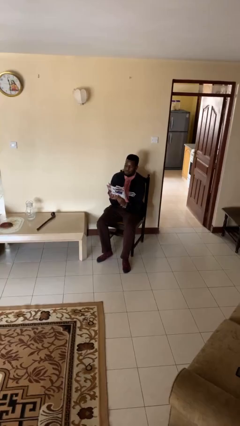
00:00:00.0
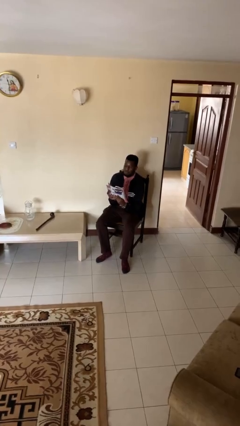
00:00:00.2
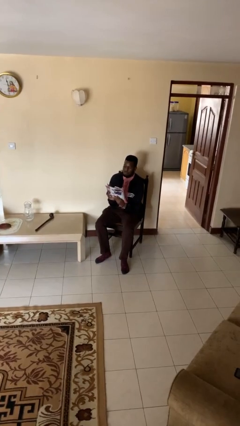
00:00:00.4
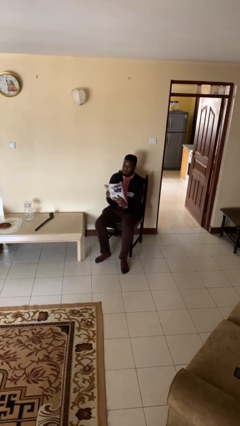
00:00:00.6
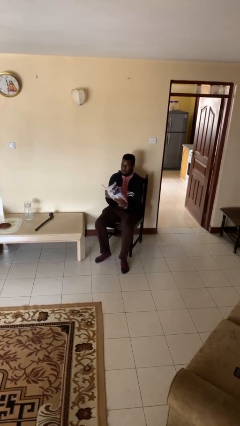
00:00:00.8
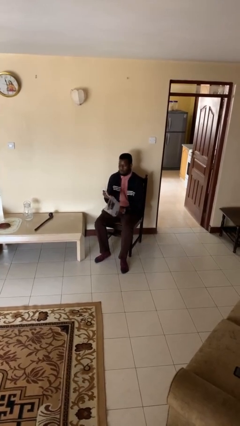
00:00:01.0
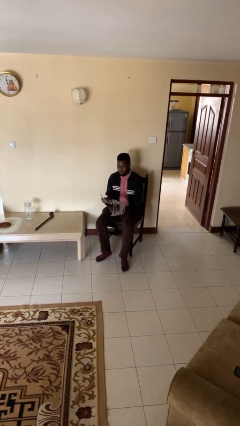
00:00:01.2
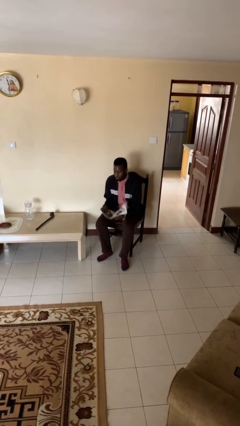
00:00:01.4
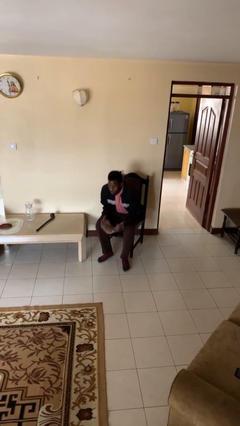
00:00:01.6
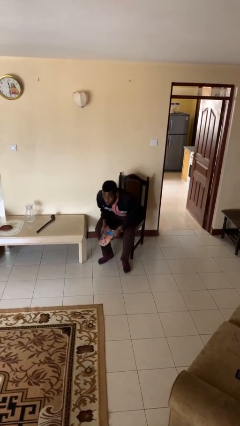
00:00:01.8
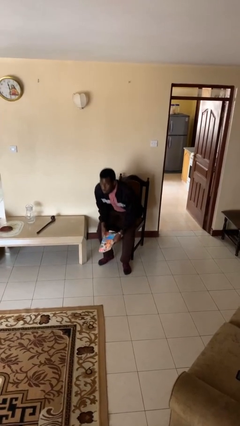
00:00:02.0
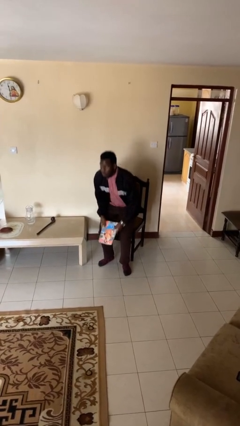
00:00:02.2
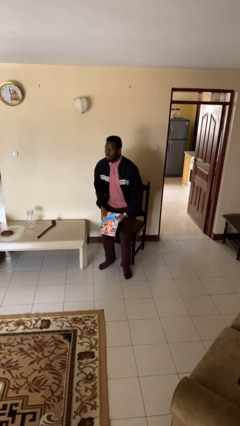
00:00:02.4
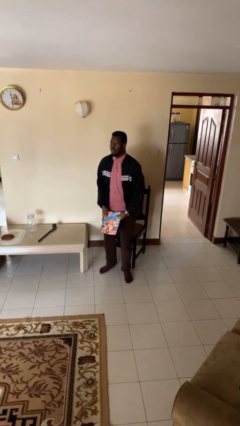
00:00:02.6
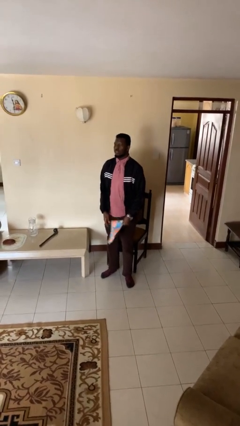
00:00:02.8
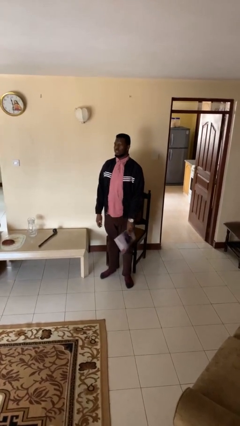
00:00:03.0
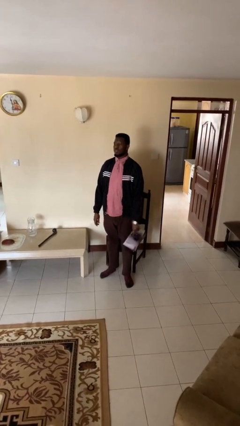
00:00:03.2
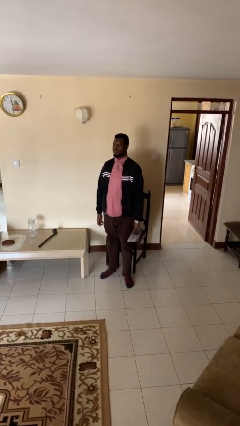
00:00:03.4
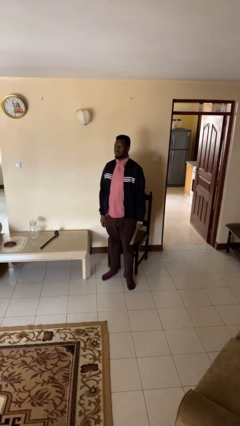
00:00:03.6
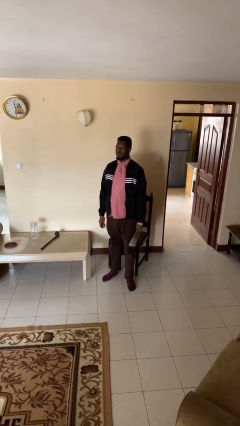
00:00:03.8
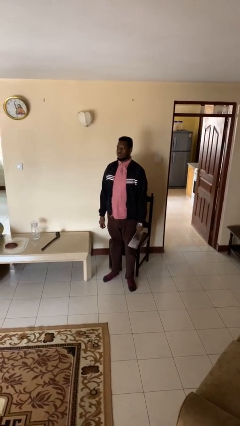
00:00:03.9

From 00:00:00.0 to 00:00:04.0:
person stands up

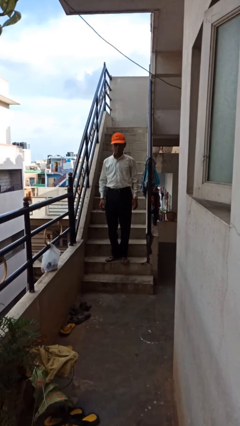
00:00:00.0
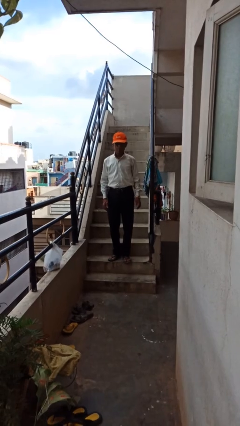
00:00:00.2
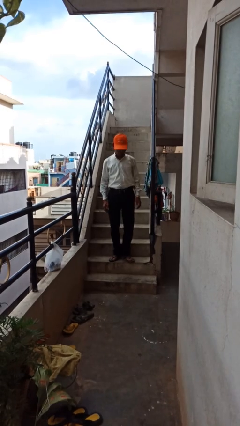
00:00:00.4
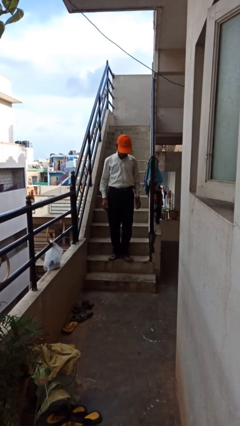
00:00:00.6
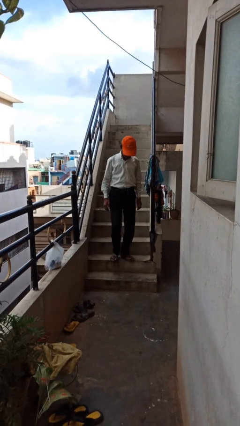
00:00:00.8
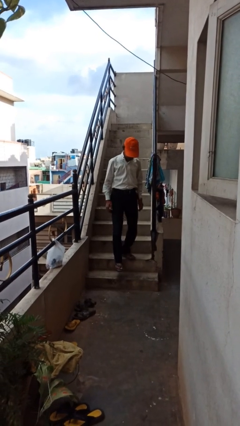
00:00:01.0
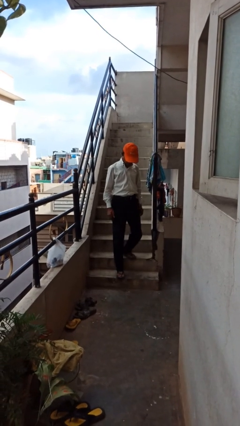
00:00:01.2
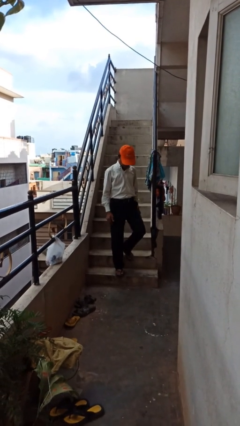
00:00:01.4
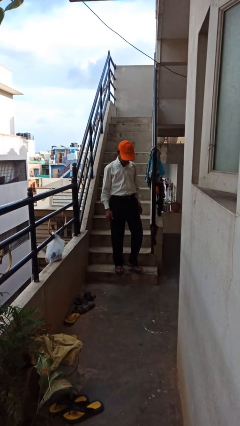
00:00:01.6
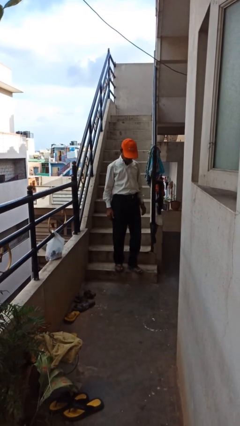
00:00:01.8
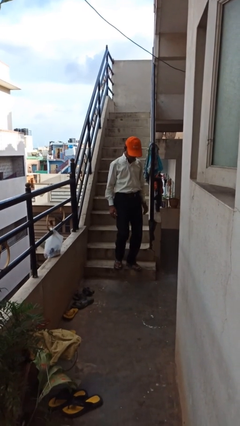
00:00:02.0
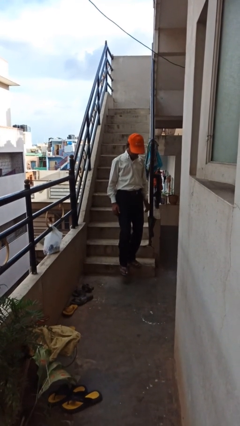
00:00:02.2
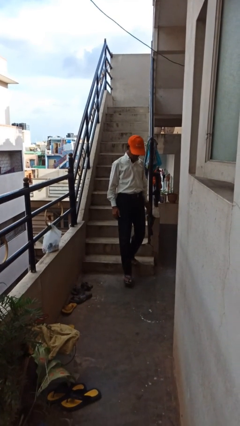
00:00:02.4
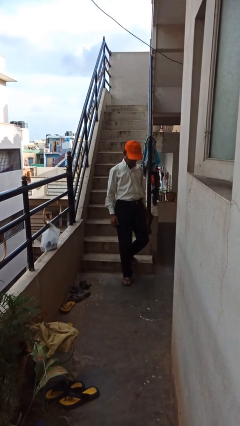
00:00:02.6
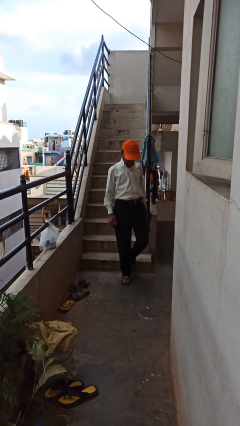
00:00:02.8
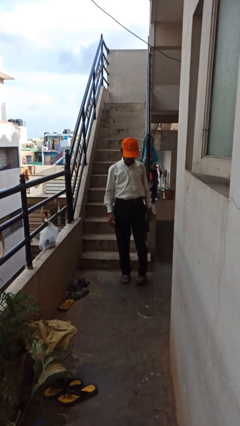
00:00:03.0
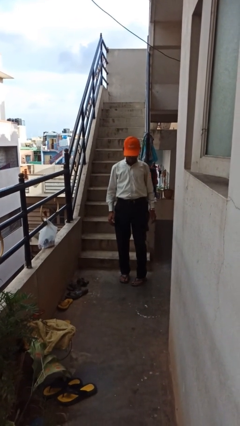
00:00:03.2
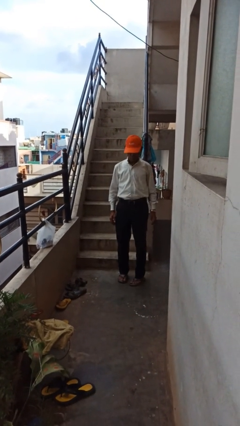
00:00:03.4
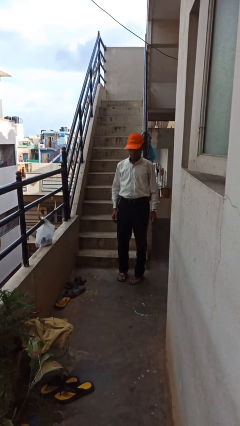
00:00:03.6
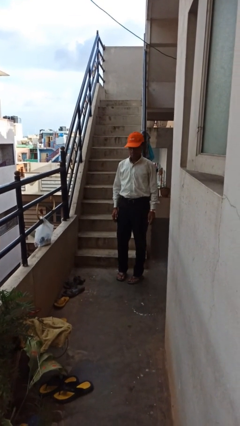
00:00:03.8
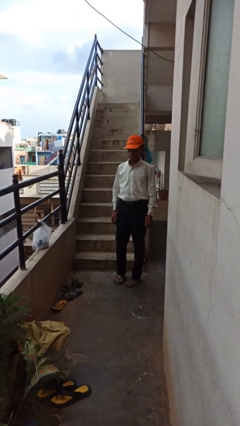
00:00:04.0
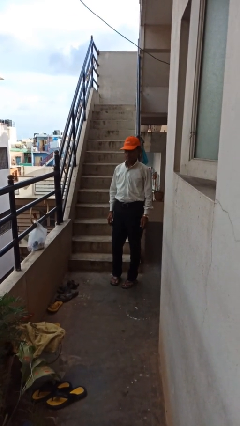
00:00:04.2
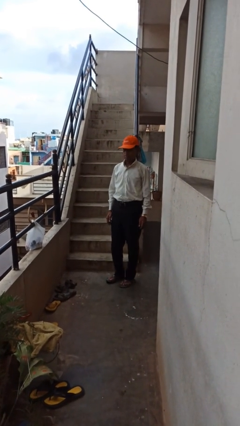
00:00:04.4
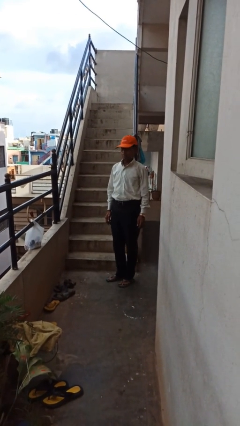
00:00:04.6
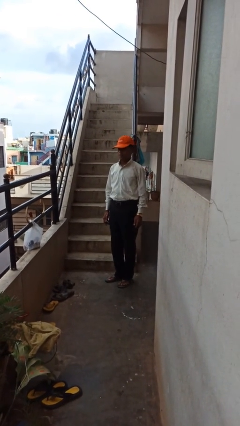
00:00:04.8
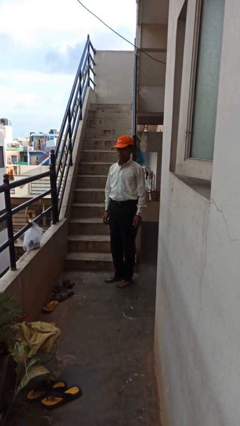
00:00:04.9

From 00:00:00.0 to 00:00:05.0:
person climbs down stairs

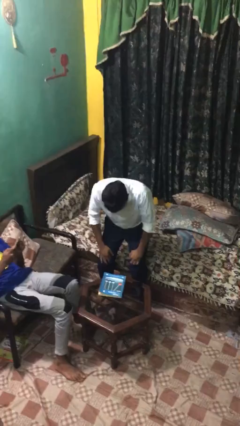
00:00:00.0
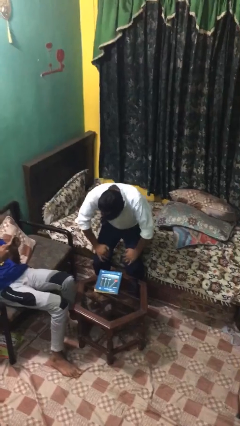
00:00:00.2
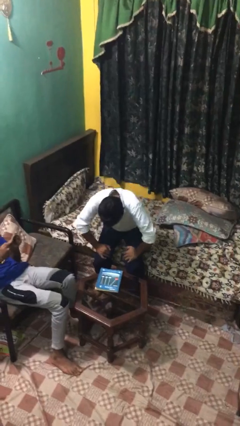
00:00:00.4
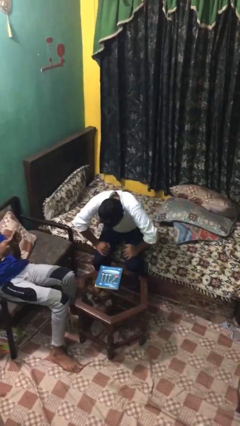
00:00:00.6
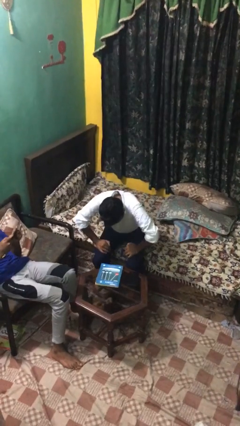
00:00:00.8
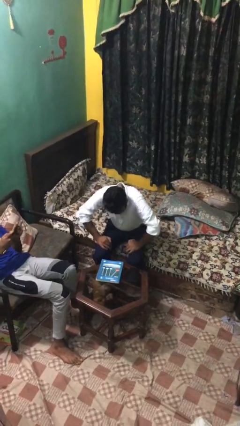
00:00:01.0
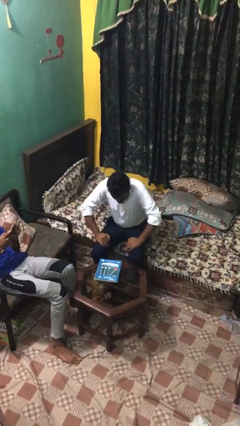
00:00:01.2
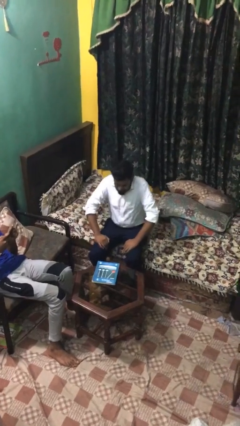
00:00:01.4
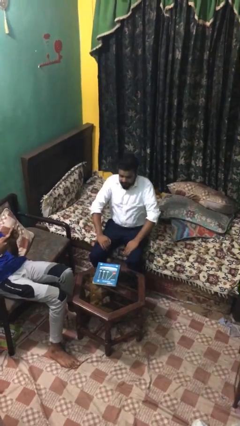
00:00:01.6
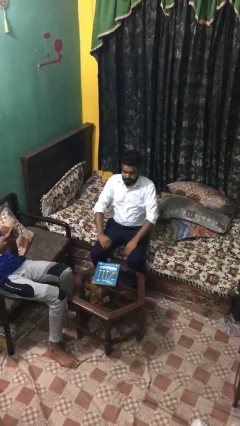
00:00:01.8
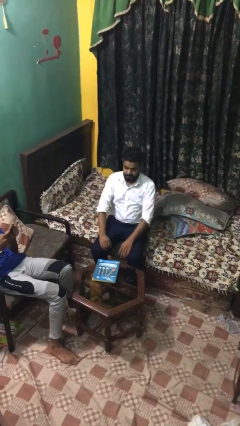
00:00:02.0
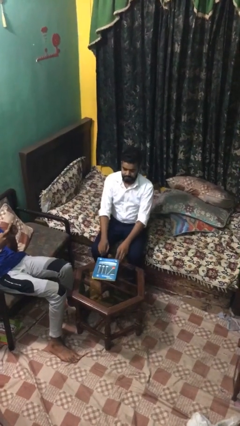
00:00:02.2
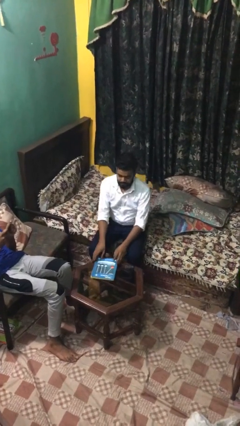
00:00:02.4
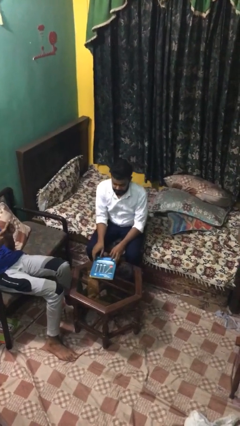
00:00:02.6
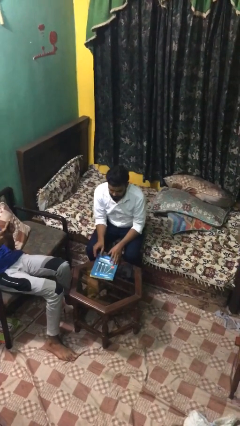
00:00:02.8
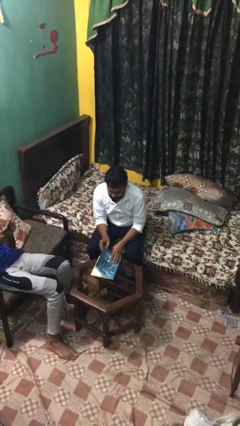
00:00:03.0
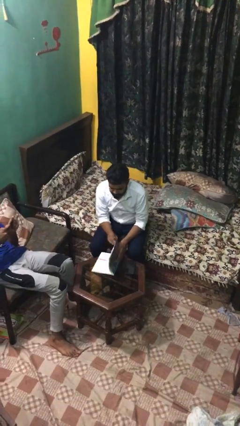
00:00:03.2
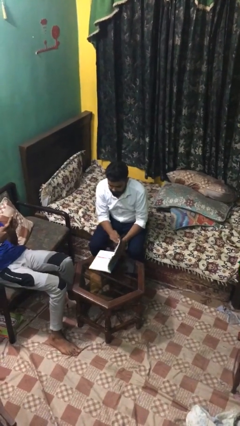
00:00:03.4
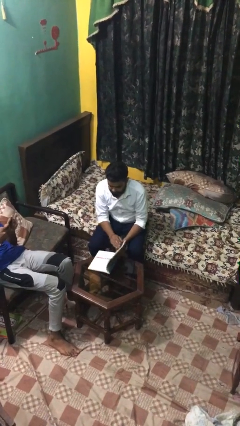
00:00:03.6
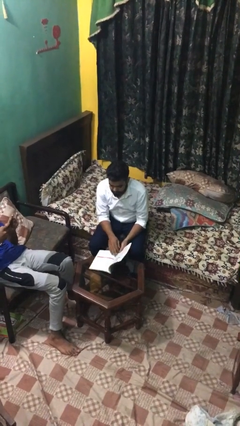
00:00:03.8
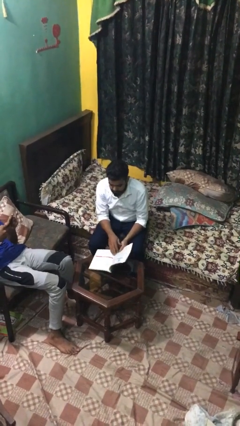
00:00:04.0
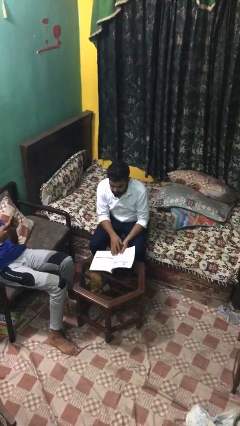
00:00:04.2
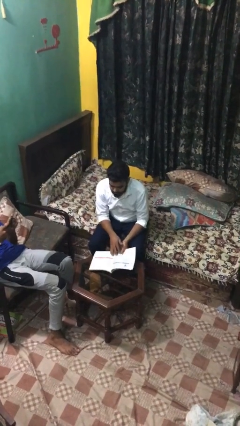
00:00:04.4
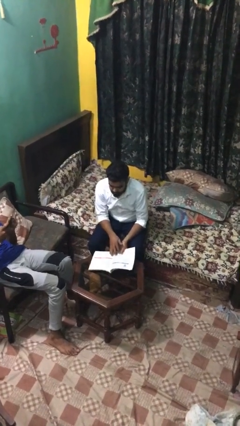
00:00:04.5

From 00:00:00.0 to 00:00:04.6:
person sits down

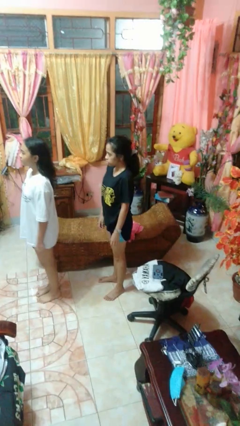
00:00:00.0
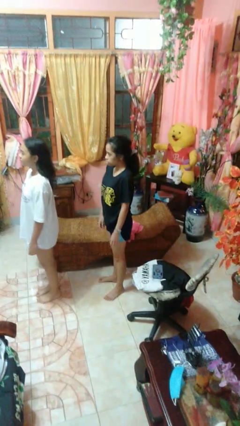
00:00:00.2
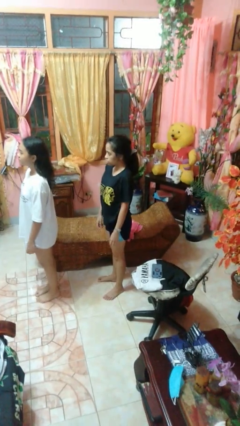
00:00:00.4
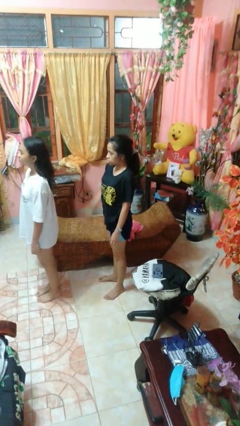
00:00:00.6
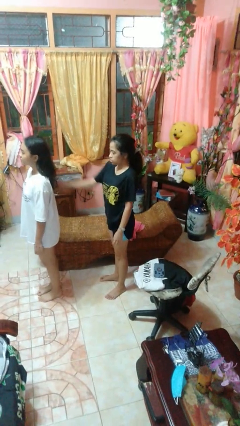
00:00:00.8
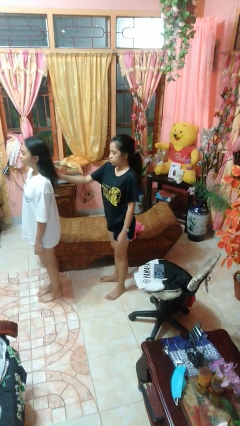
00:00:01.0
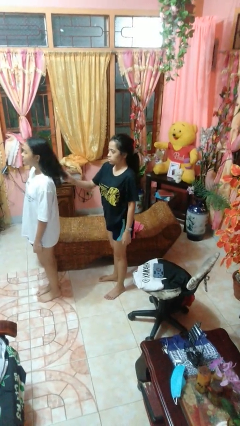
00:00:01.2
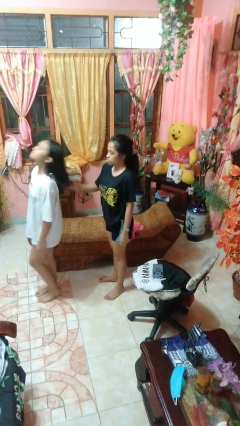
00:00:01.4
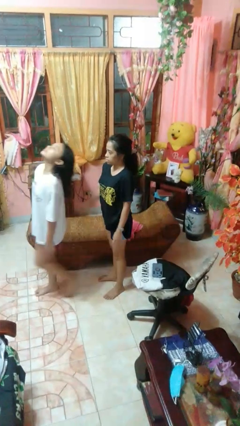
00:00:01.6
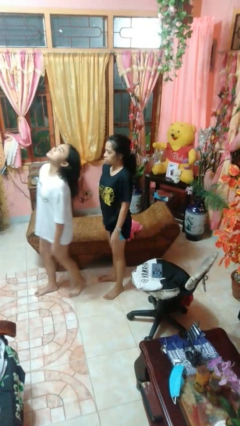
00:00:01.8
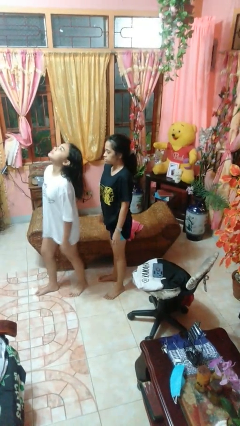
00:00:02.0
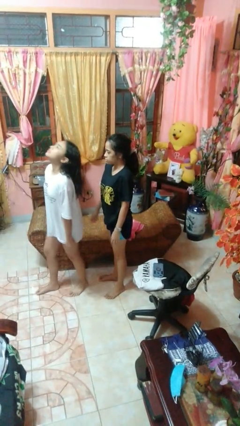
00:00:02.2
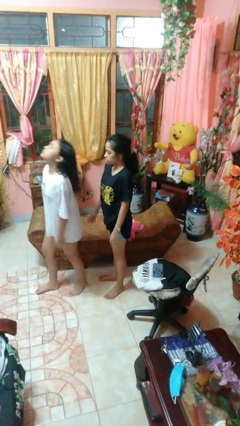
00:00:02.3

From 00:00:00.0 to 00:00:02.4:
person grabs person by hair

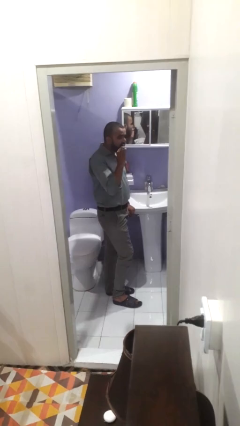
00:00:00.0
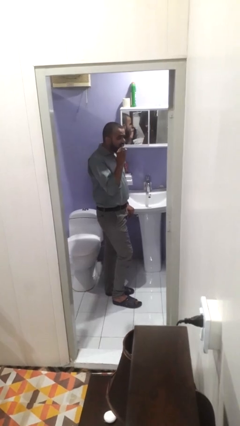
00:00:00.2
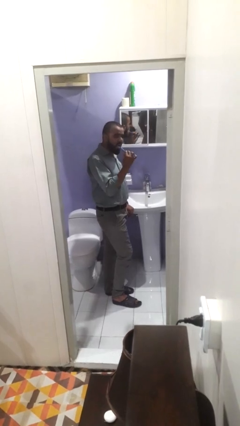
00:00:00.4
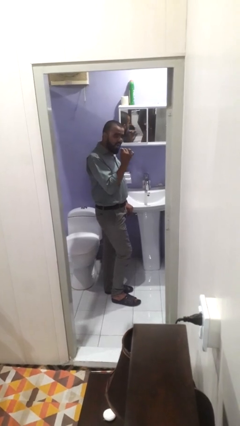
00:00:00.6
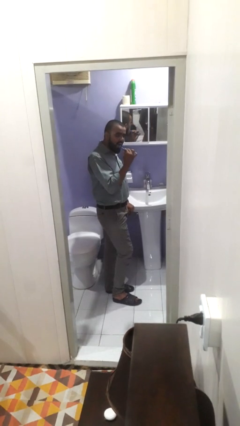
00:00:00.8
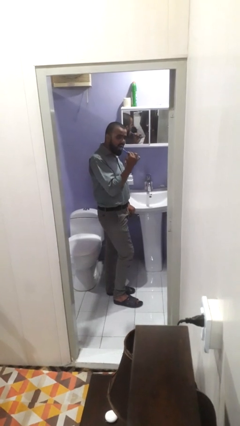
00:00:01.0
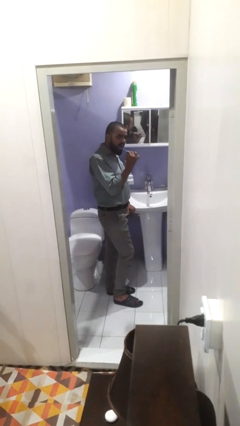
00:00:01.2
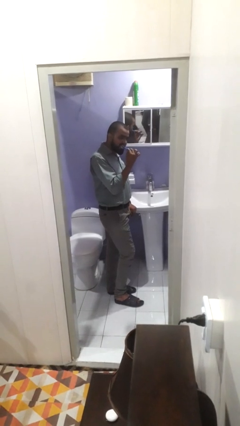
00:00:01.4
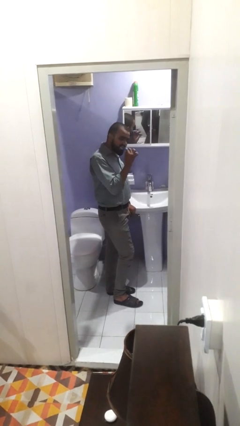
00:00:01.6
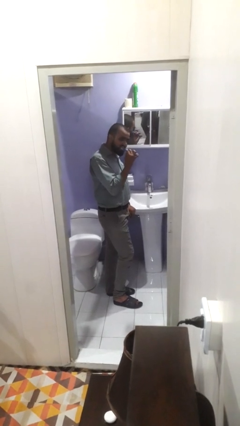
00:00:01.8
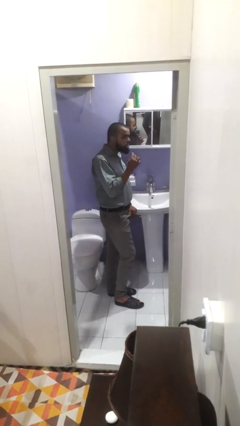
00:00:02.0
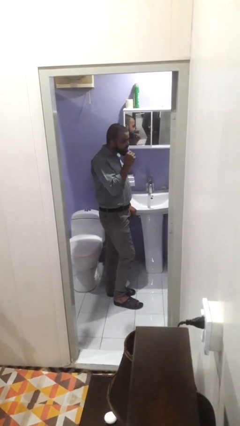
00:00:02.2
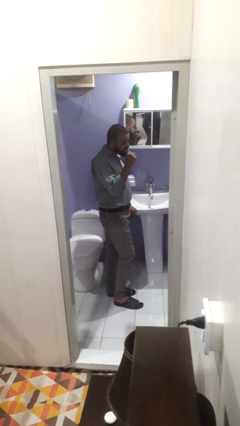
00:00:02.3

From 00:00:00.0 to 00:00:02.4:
person brushes teeth
